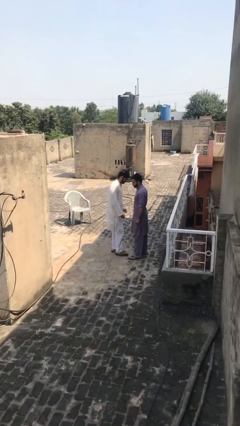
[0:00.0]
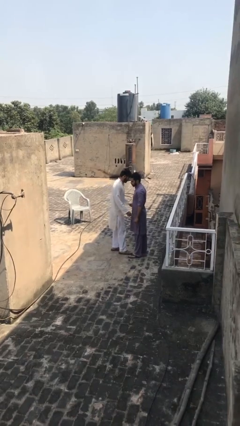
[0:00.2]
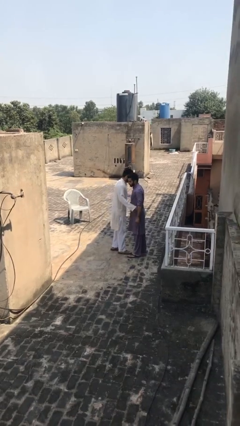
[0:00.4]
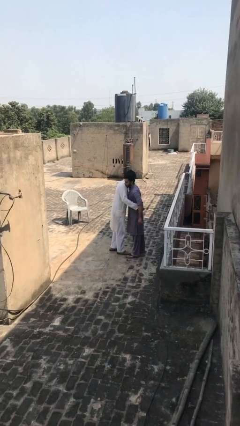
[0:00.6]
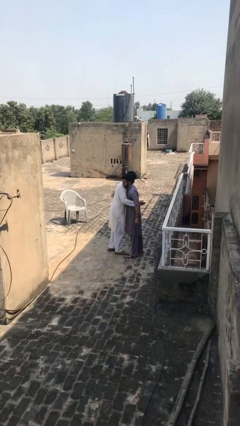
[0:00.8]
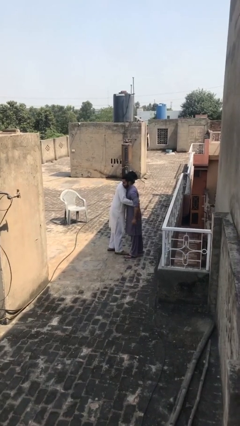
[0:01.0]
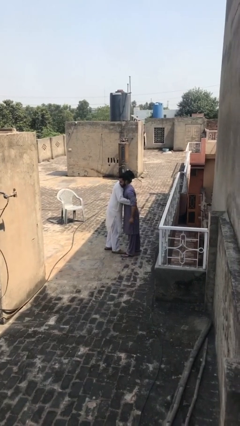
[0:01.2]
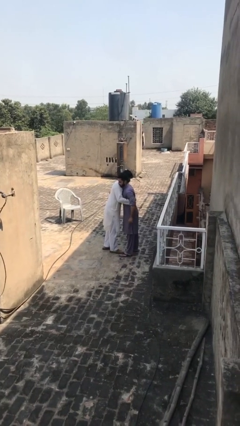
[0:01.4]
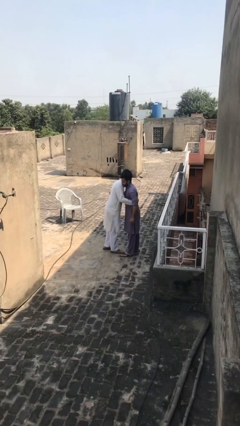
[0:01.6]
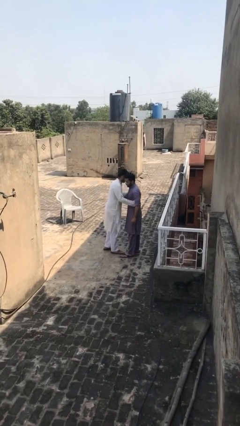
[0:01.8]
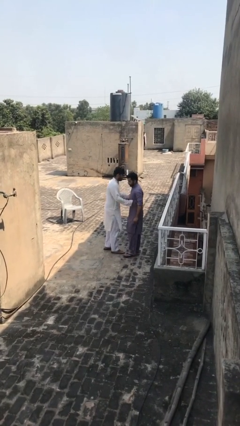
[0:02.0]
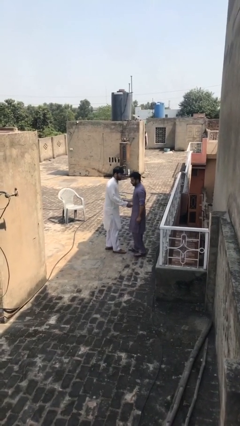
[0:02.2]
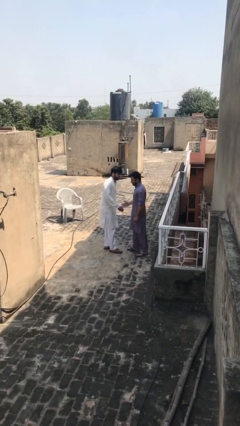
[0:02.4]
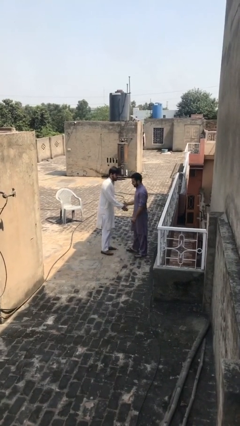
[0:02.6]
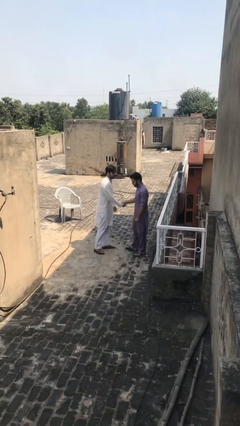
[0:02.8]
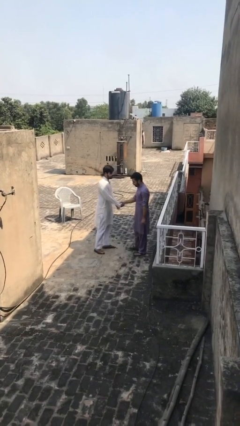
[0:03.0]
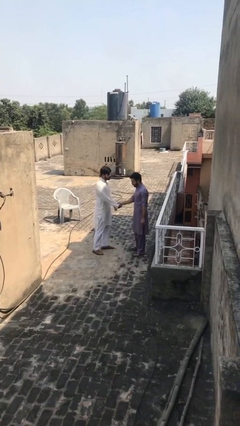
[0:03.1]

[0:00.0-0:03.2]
person embraces person

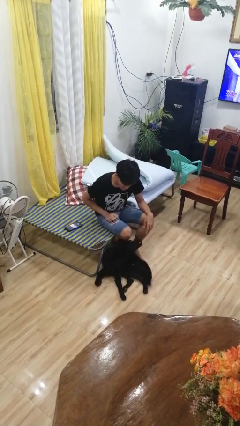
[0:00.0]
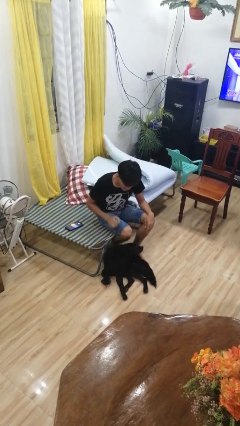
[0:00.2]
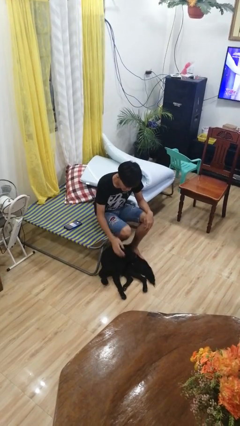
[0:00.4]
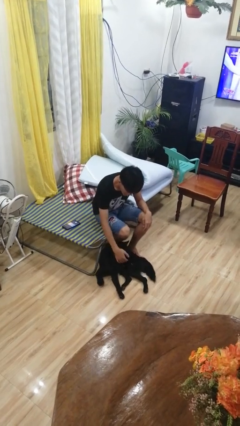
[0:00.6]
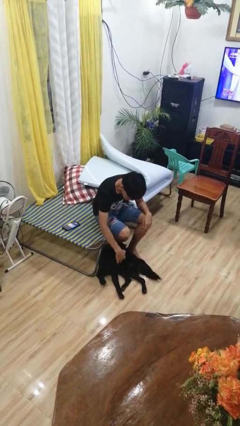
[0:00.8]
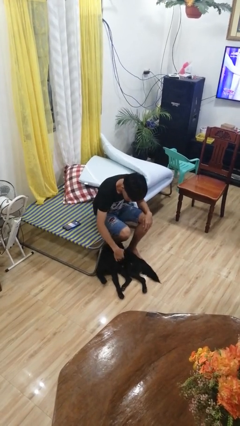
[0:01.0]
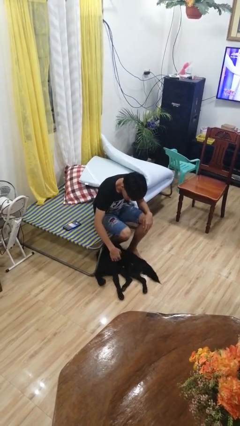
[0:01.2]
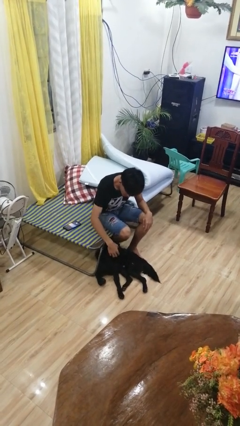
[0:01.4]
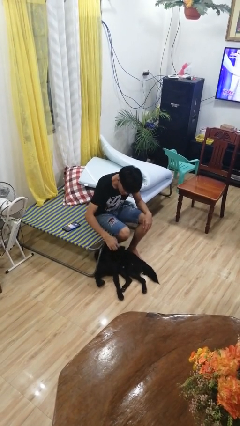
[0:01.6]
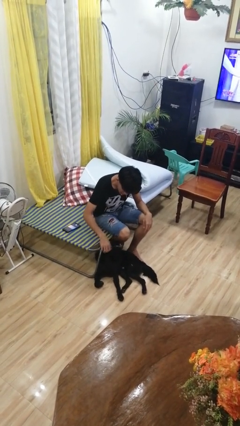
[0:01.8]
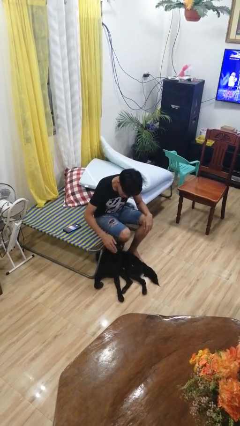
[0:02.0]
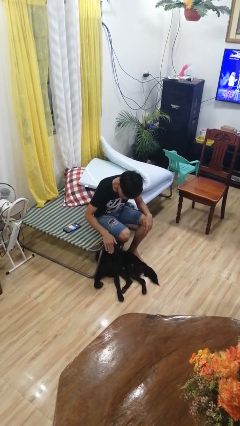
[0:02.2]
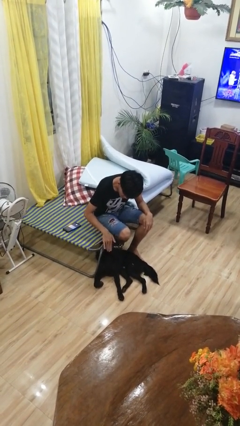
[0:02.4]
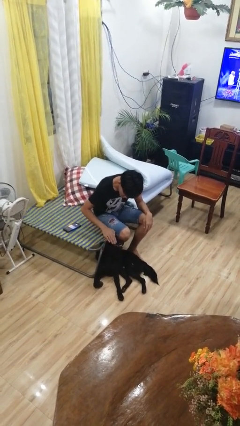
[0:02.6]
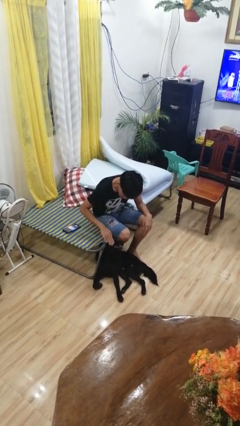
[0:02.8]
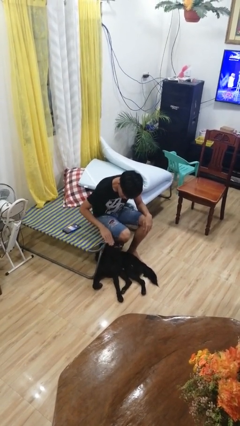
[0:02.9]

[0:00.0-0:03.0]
person pets dog

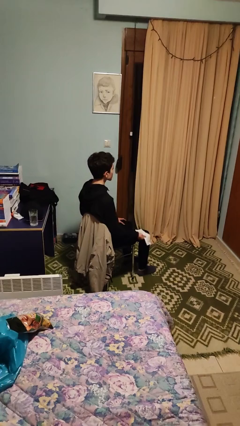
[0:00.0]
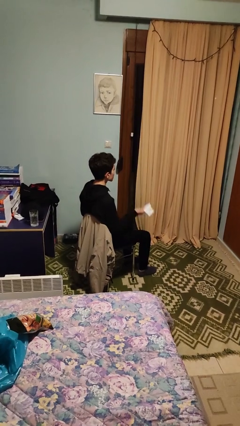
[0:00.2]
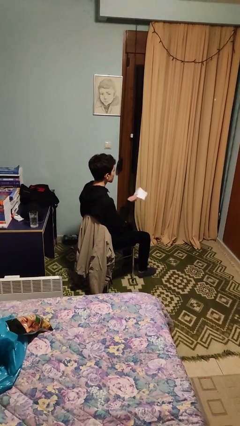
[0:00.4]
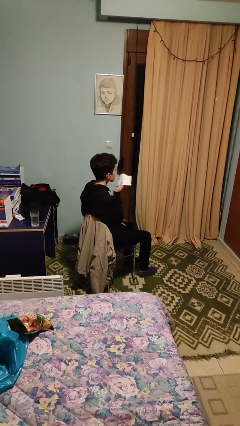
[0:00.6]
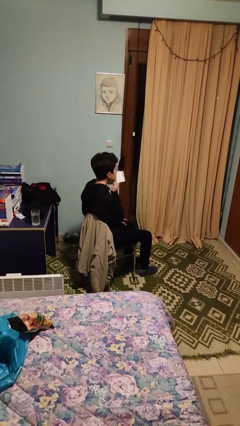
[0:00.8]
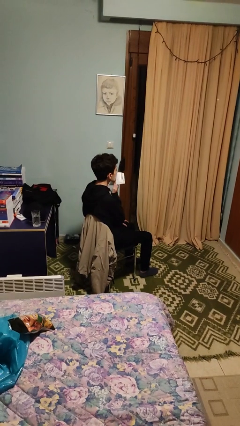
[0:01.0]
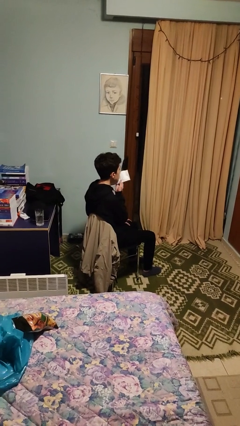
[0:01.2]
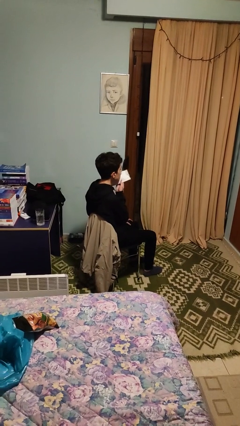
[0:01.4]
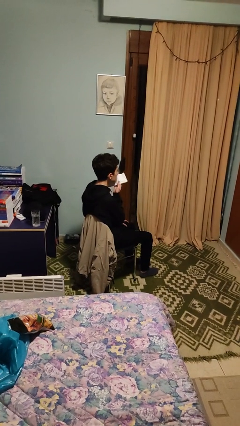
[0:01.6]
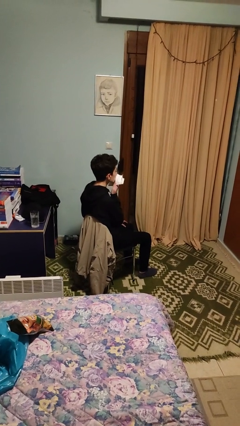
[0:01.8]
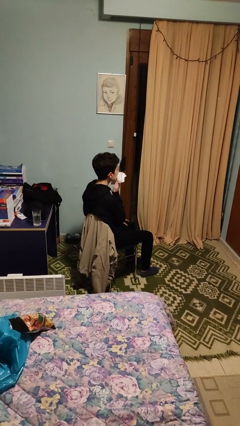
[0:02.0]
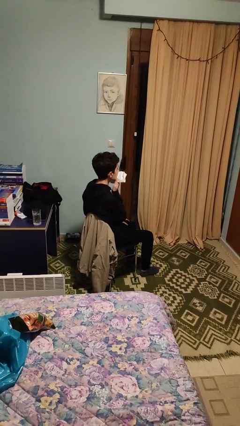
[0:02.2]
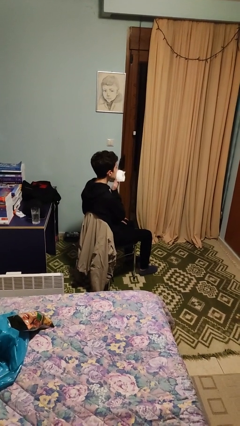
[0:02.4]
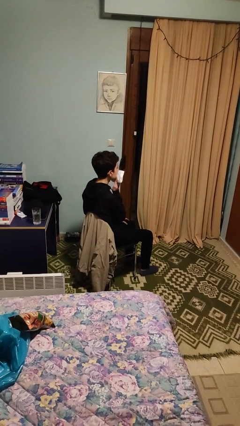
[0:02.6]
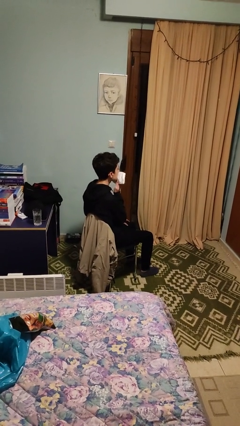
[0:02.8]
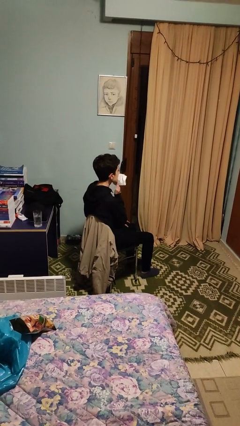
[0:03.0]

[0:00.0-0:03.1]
person wipes mouth with napkin

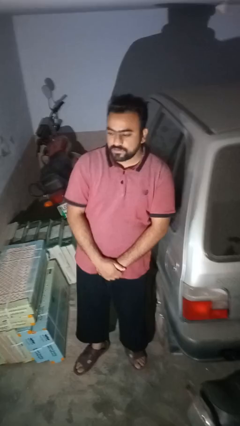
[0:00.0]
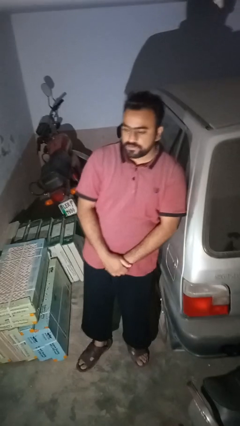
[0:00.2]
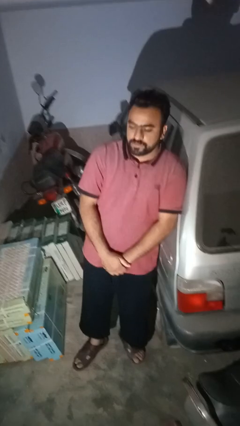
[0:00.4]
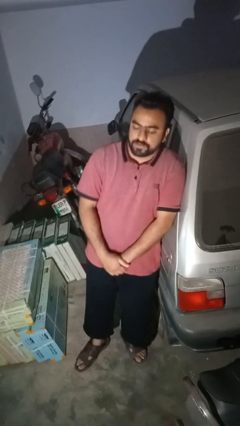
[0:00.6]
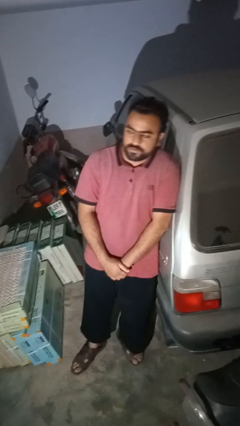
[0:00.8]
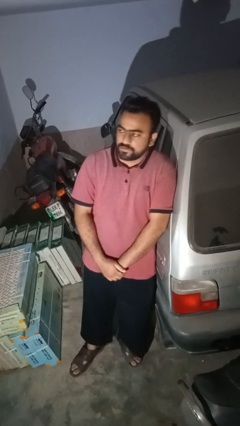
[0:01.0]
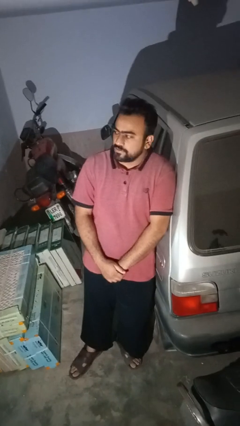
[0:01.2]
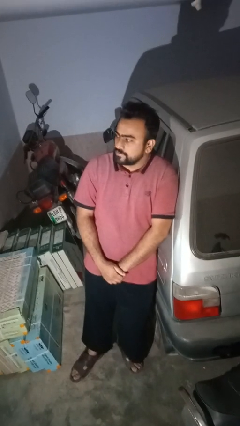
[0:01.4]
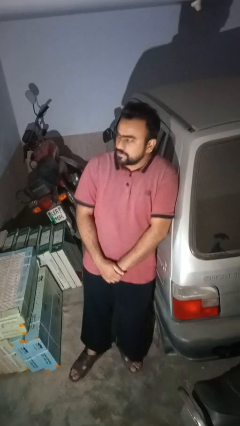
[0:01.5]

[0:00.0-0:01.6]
person leans against car

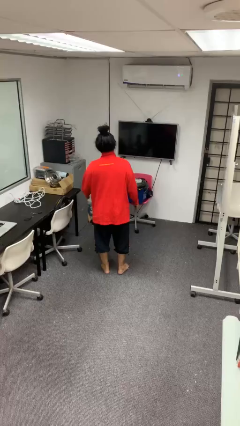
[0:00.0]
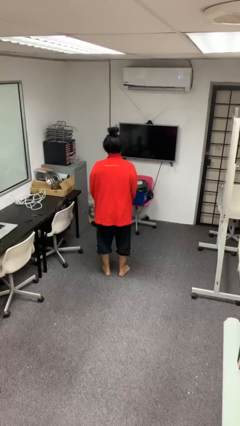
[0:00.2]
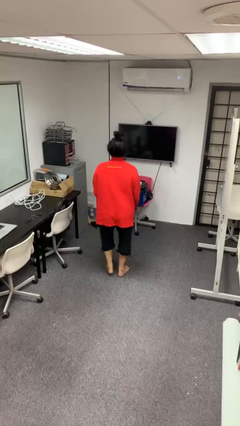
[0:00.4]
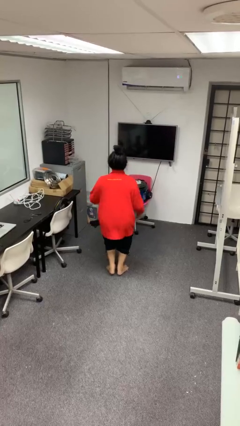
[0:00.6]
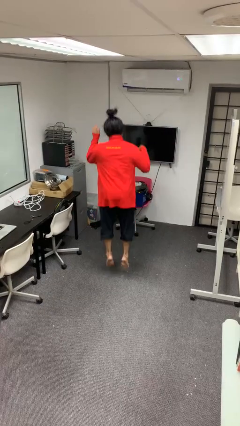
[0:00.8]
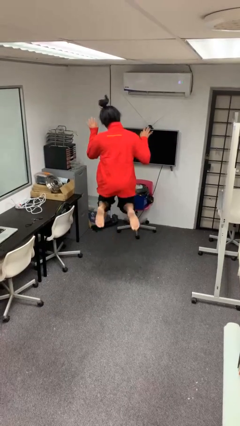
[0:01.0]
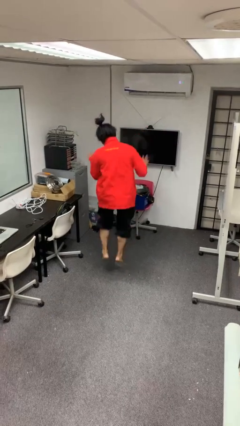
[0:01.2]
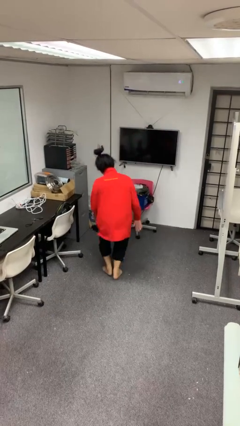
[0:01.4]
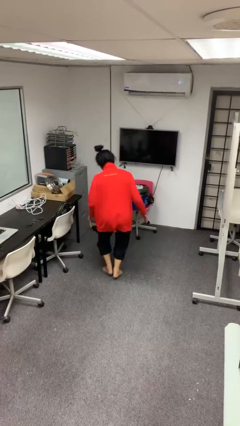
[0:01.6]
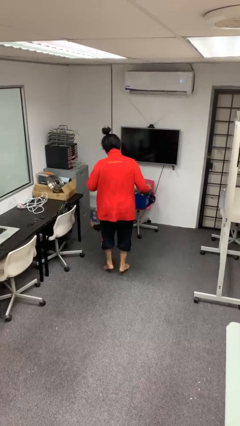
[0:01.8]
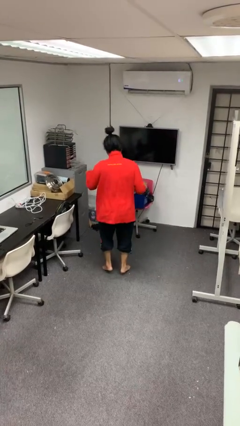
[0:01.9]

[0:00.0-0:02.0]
person jumps

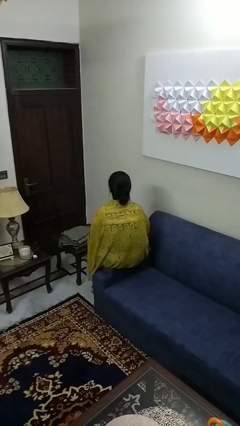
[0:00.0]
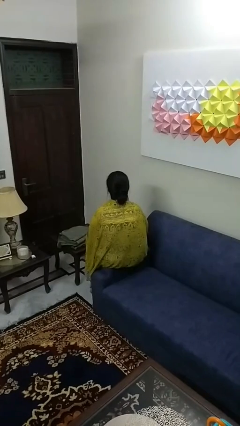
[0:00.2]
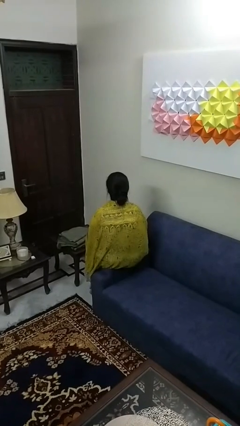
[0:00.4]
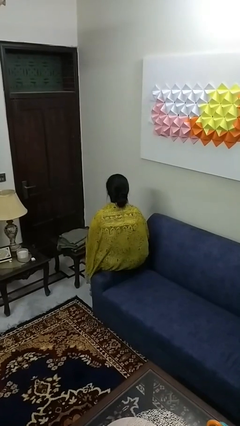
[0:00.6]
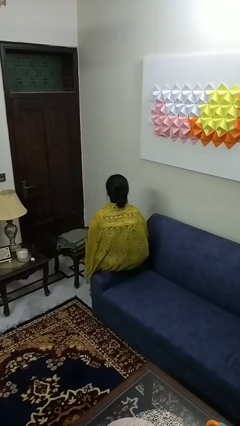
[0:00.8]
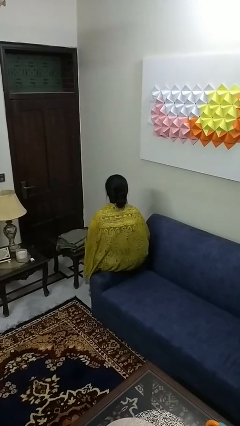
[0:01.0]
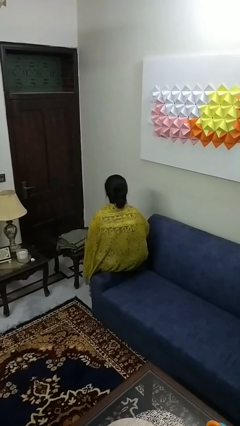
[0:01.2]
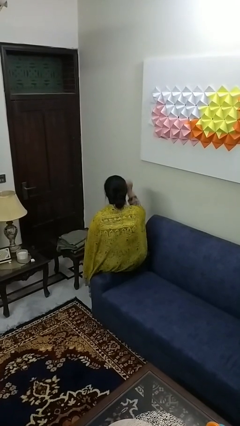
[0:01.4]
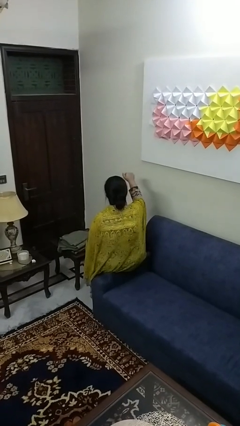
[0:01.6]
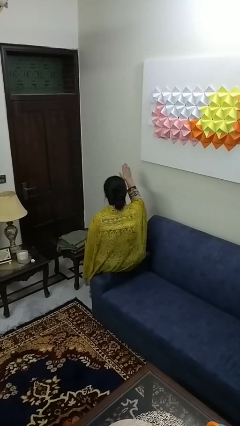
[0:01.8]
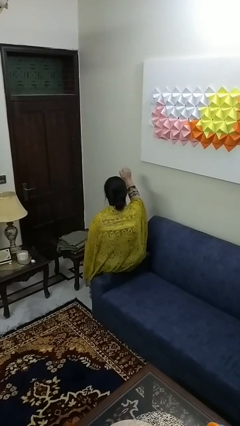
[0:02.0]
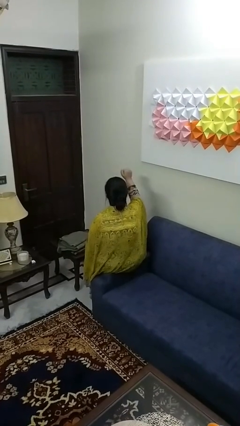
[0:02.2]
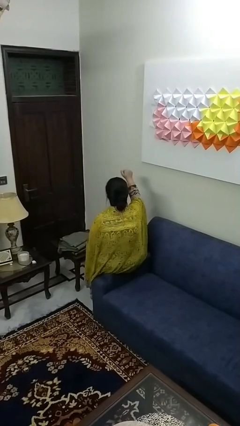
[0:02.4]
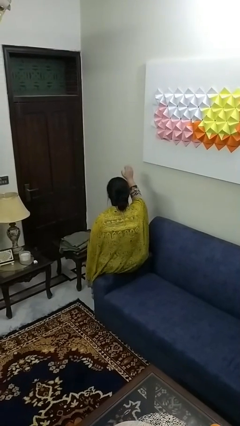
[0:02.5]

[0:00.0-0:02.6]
person gestures come here

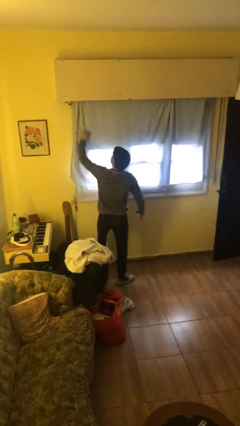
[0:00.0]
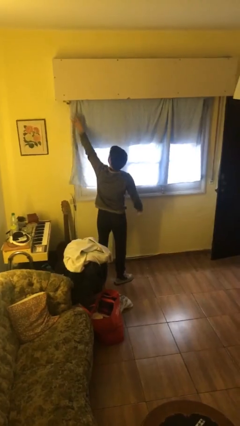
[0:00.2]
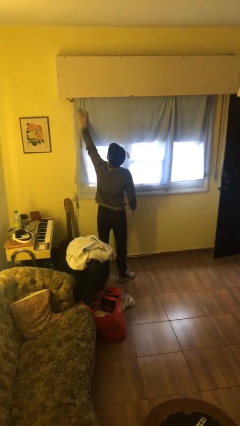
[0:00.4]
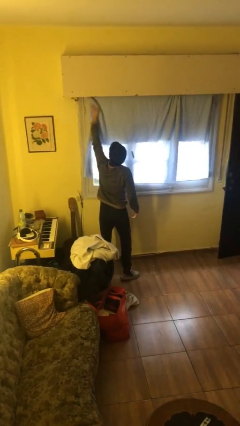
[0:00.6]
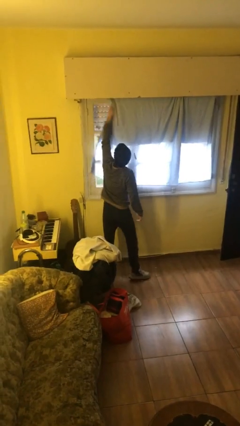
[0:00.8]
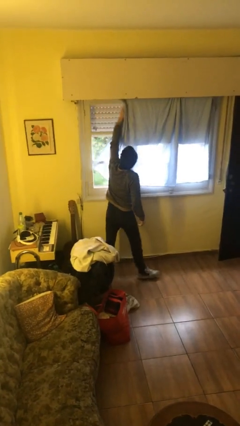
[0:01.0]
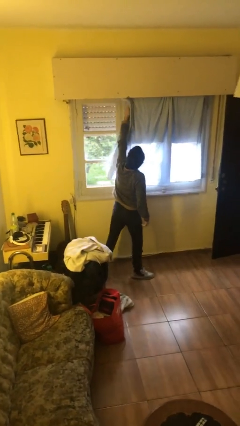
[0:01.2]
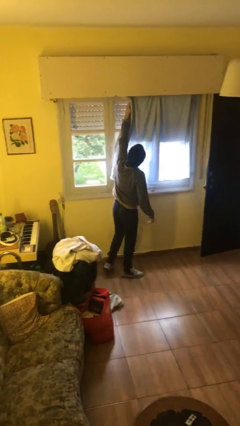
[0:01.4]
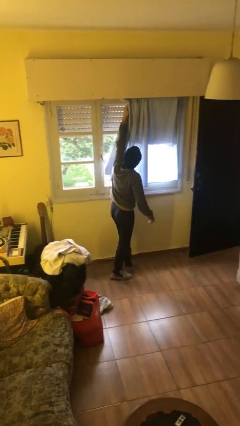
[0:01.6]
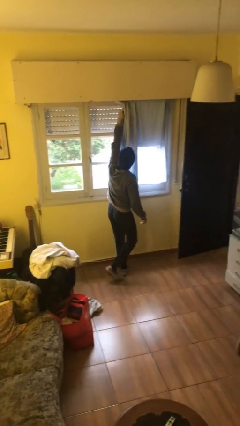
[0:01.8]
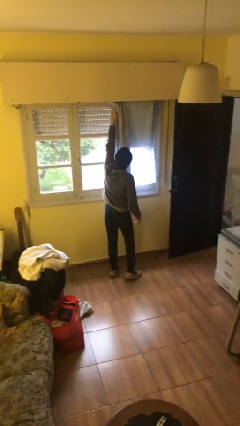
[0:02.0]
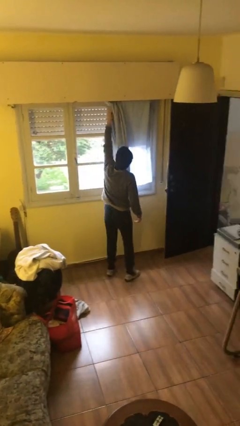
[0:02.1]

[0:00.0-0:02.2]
person opens curtains
